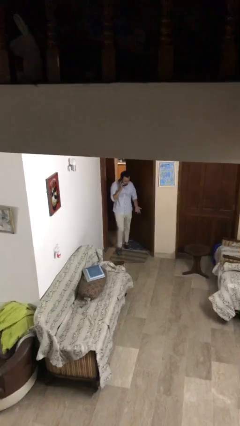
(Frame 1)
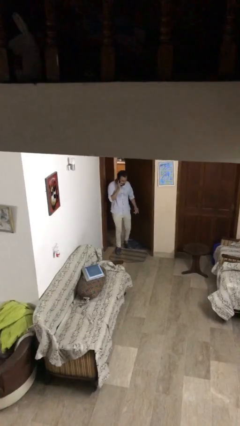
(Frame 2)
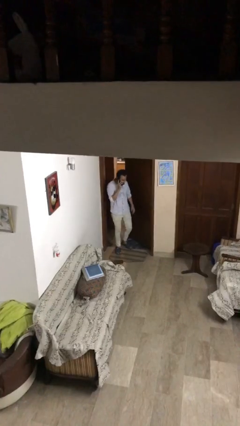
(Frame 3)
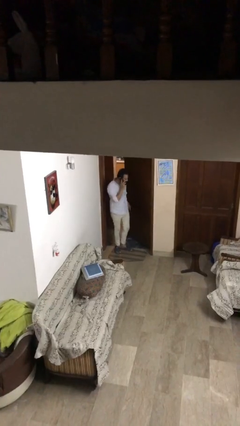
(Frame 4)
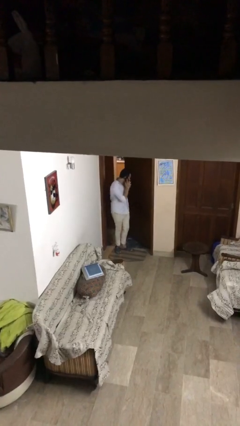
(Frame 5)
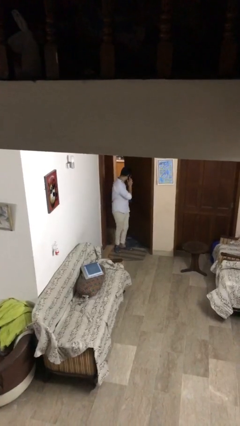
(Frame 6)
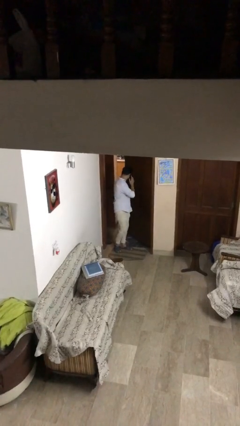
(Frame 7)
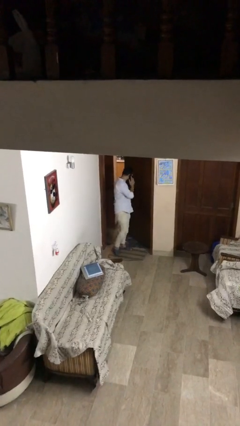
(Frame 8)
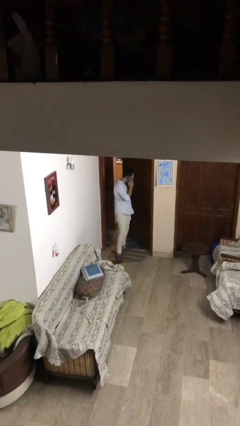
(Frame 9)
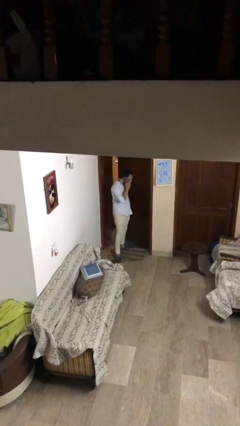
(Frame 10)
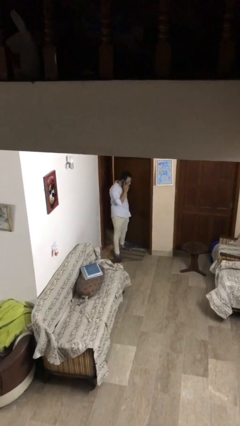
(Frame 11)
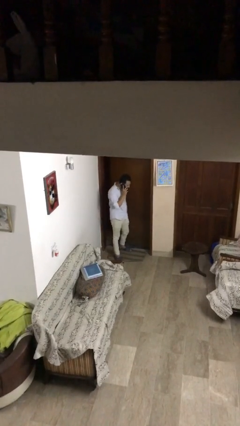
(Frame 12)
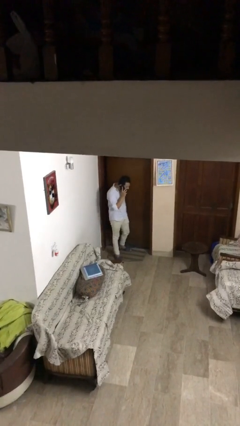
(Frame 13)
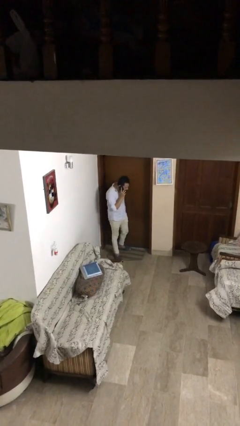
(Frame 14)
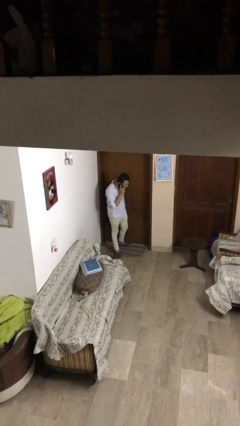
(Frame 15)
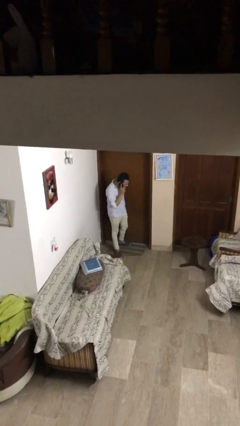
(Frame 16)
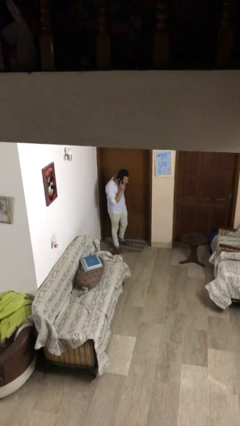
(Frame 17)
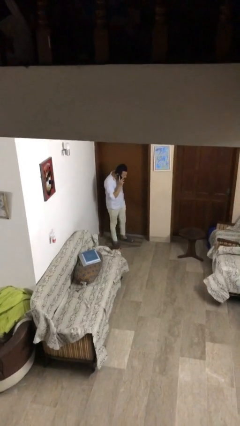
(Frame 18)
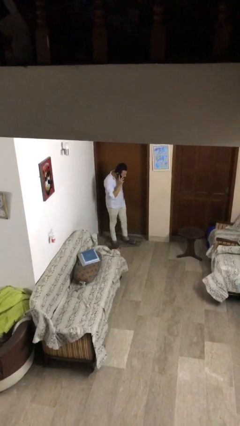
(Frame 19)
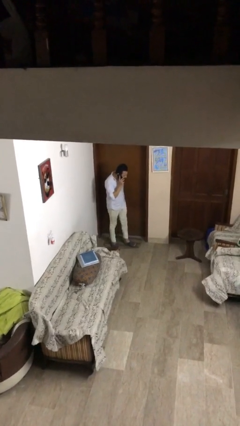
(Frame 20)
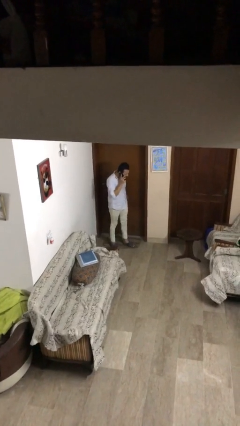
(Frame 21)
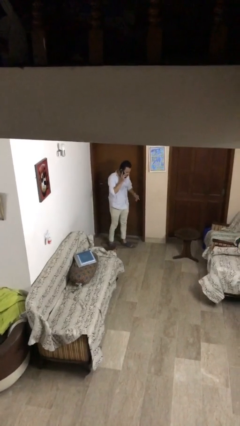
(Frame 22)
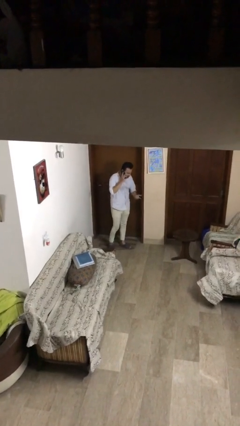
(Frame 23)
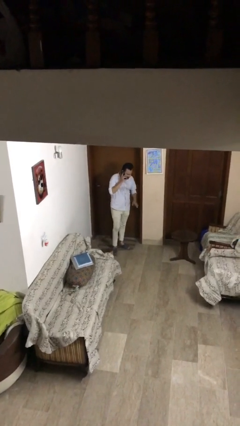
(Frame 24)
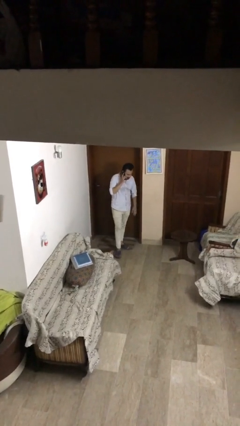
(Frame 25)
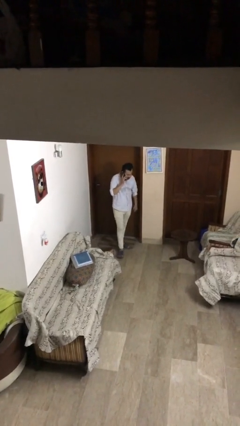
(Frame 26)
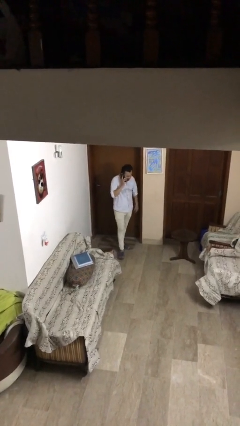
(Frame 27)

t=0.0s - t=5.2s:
person closes facility door

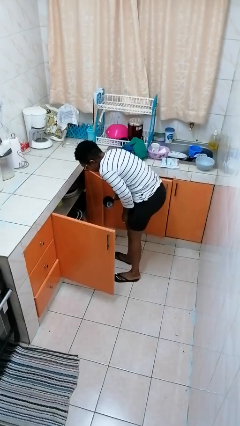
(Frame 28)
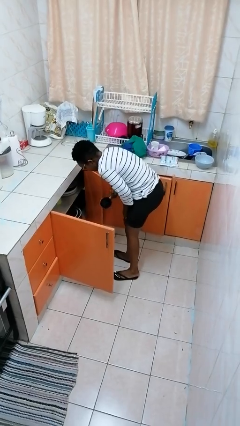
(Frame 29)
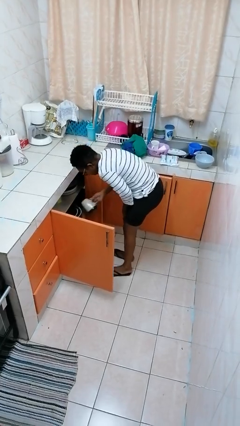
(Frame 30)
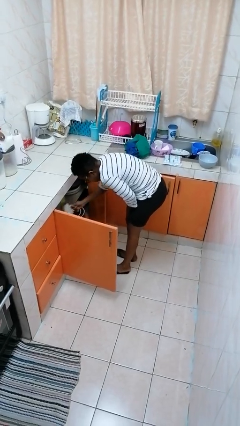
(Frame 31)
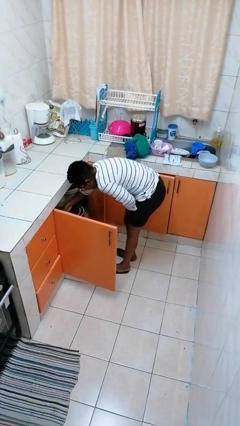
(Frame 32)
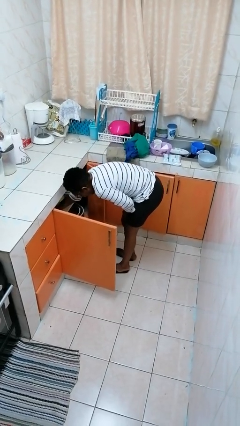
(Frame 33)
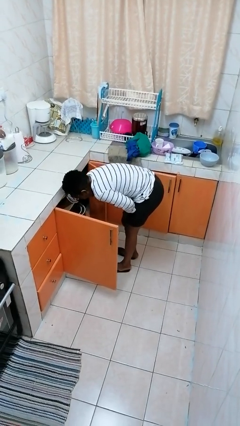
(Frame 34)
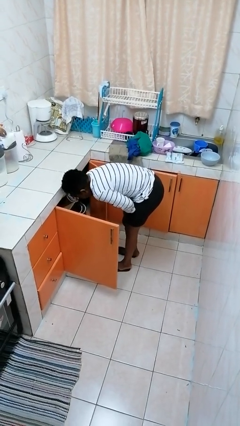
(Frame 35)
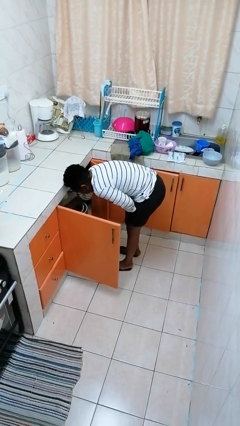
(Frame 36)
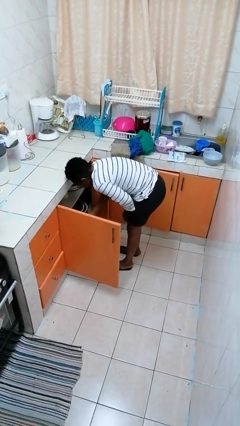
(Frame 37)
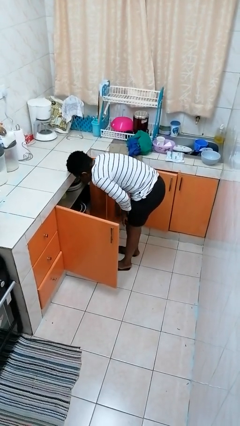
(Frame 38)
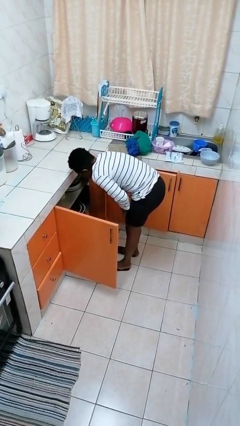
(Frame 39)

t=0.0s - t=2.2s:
person puts object in cabinet

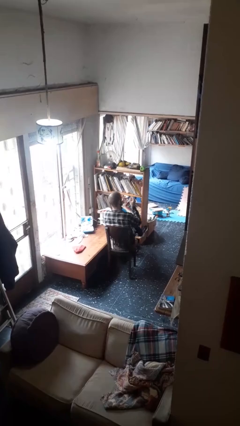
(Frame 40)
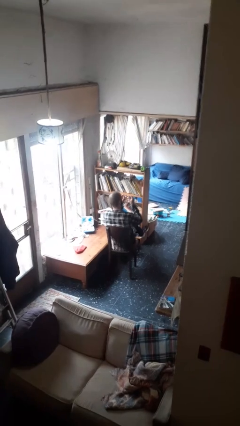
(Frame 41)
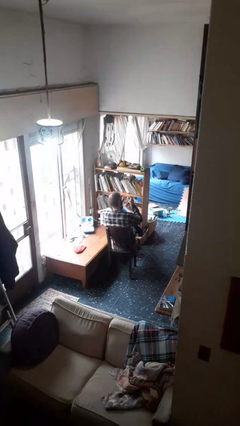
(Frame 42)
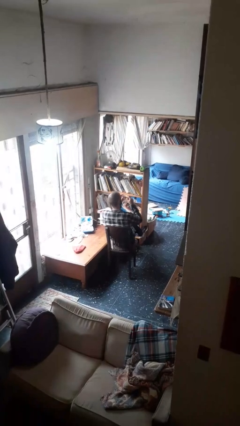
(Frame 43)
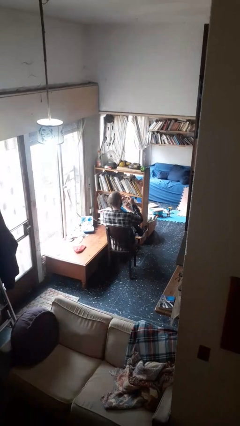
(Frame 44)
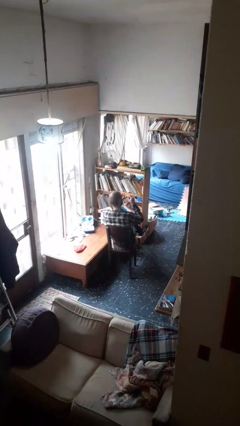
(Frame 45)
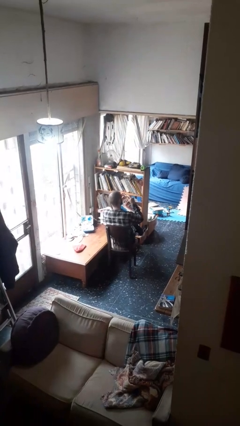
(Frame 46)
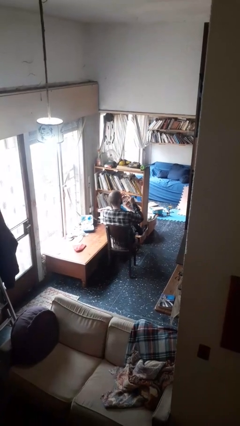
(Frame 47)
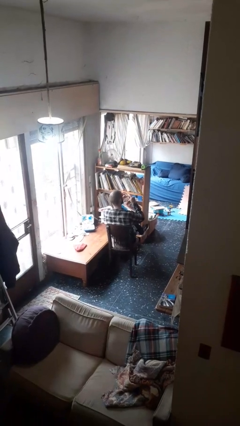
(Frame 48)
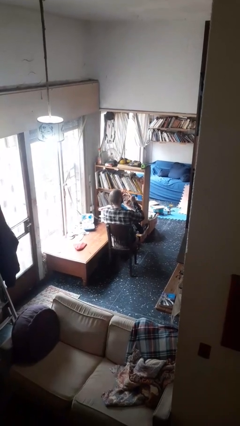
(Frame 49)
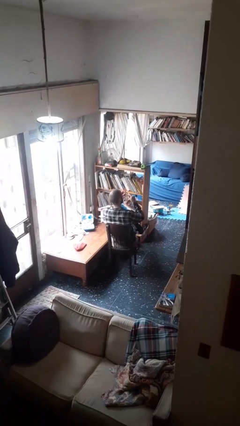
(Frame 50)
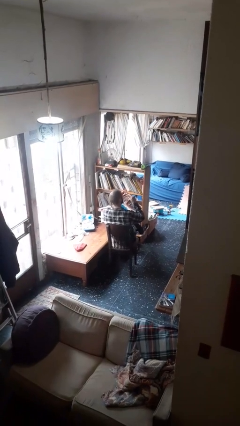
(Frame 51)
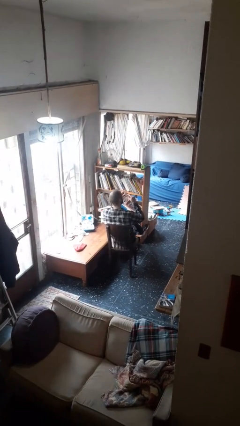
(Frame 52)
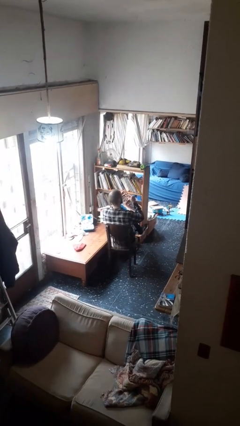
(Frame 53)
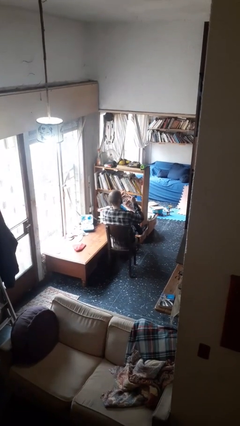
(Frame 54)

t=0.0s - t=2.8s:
person clips fingernails

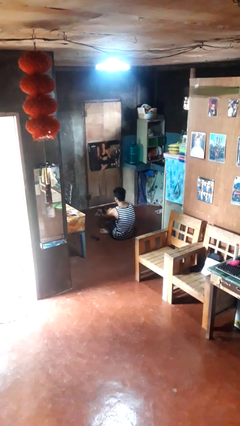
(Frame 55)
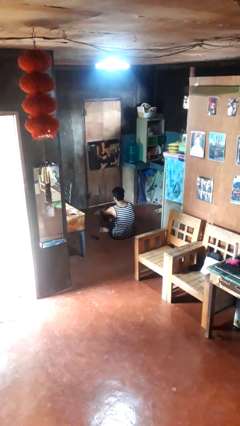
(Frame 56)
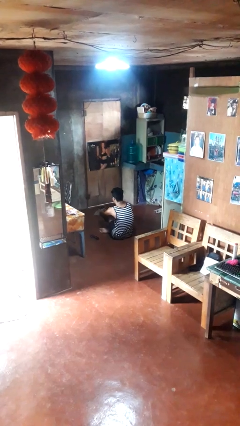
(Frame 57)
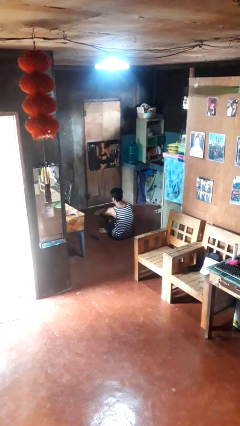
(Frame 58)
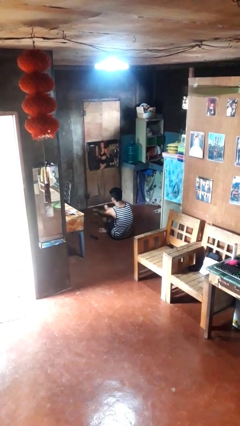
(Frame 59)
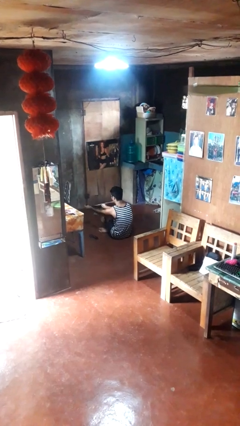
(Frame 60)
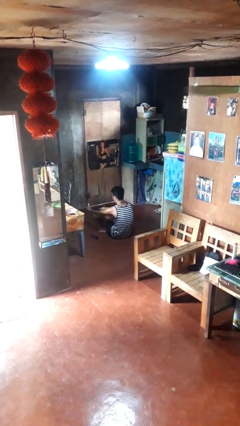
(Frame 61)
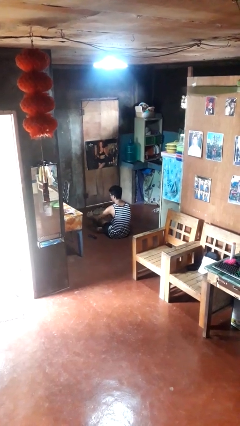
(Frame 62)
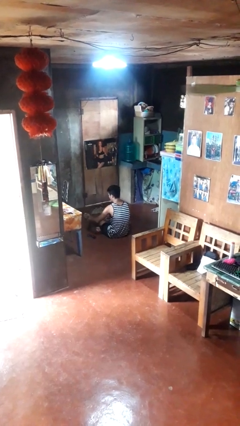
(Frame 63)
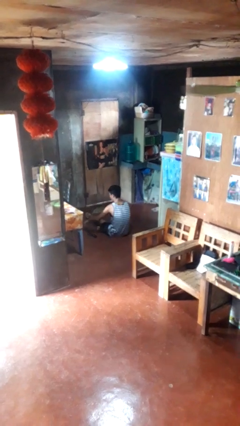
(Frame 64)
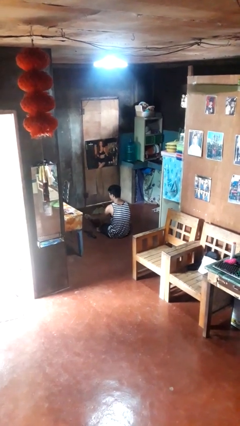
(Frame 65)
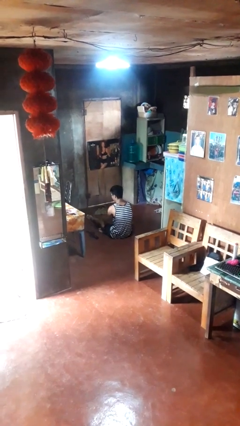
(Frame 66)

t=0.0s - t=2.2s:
person takes off socks

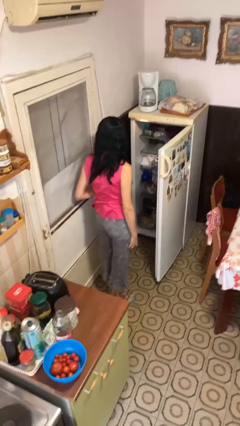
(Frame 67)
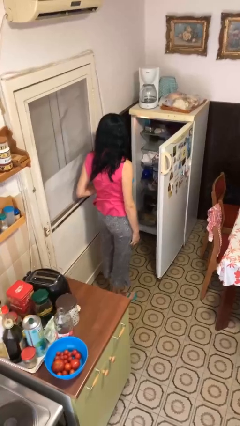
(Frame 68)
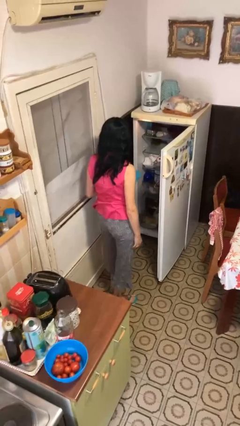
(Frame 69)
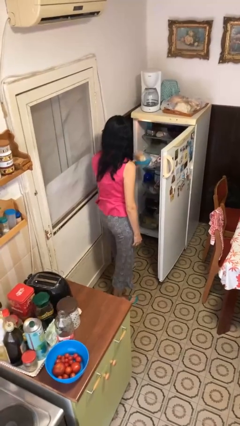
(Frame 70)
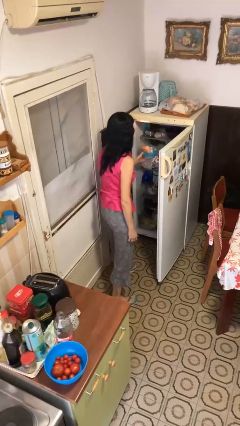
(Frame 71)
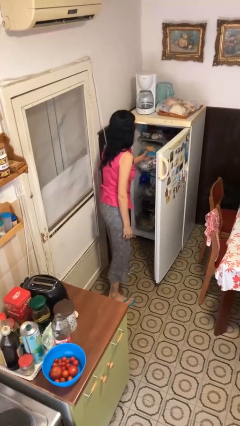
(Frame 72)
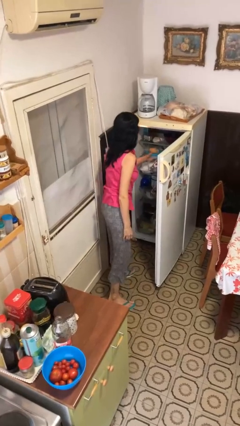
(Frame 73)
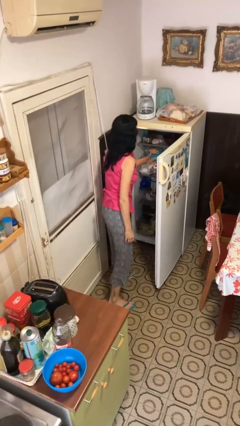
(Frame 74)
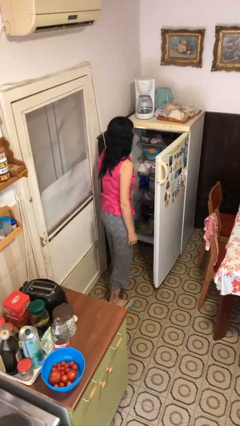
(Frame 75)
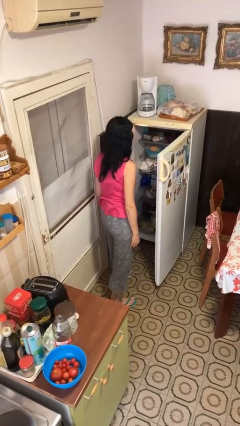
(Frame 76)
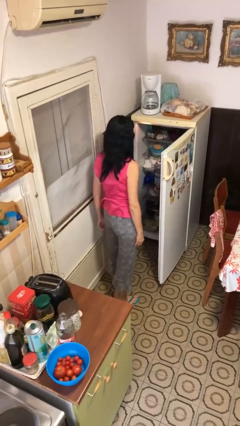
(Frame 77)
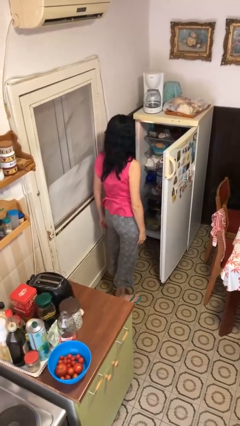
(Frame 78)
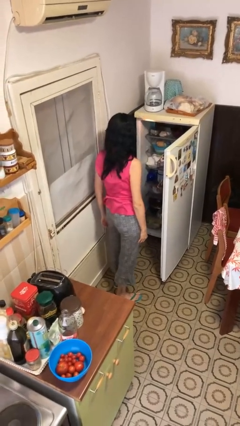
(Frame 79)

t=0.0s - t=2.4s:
person puts object into refrigerator

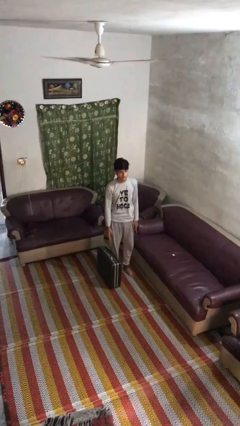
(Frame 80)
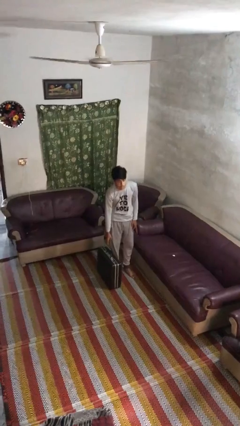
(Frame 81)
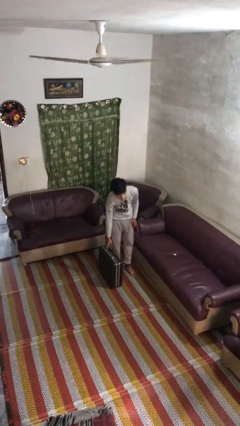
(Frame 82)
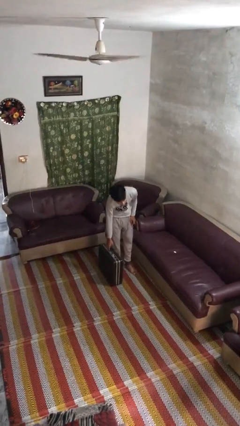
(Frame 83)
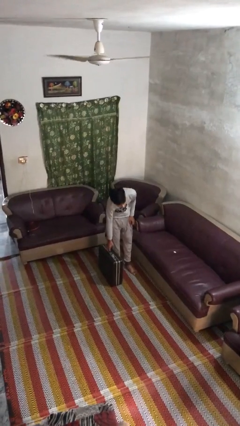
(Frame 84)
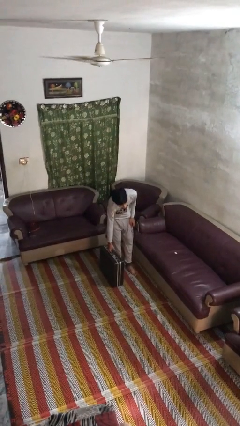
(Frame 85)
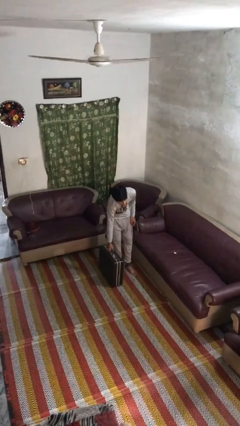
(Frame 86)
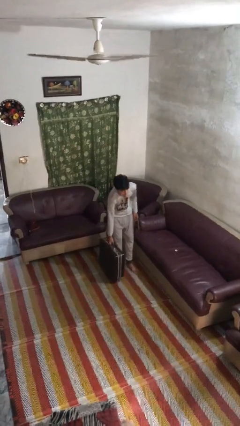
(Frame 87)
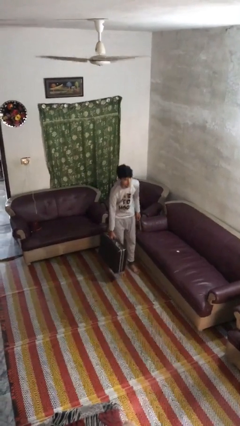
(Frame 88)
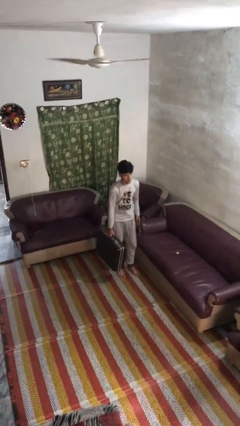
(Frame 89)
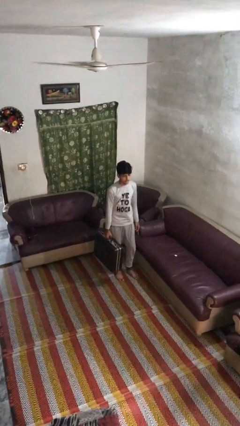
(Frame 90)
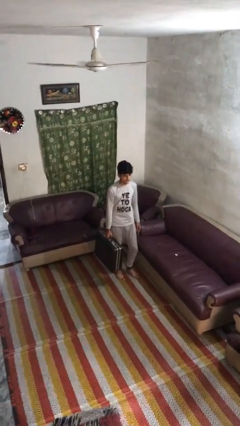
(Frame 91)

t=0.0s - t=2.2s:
person picks up object from floor

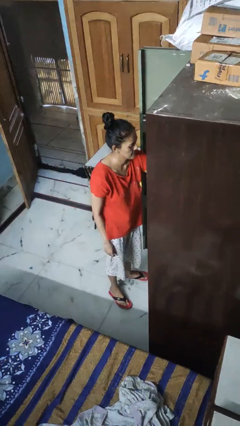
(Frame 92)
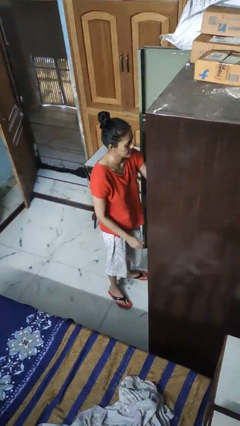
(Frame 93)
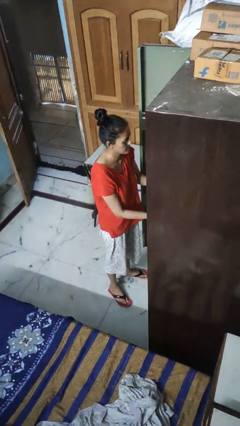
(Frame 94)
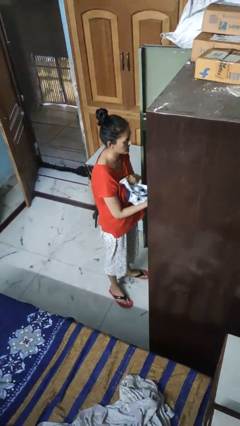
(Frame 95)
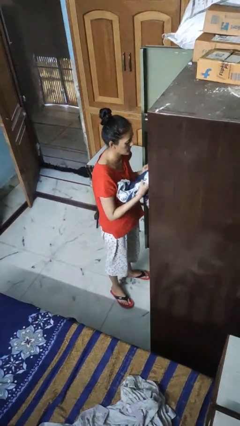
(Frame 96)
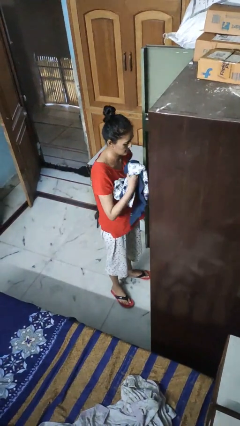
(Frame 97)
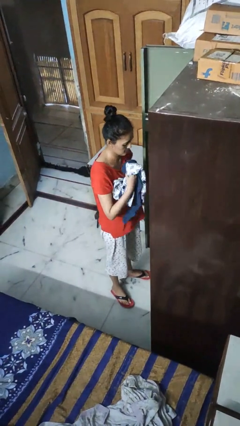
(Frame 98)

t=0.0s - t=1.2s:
person takes clothes from dresser
